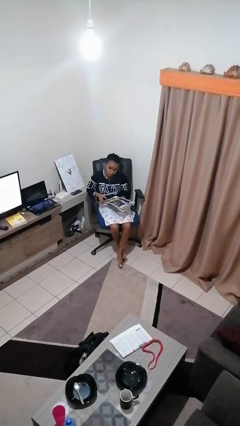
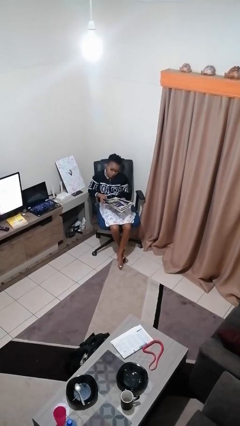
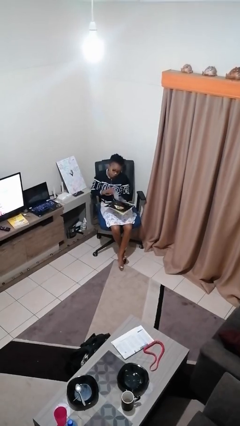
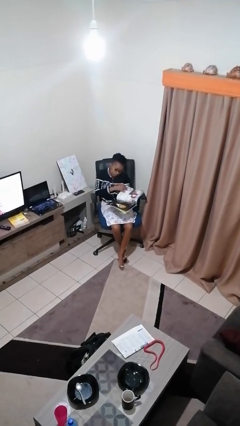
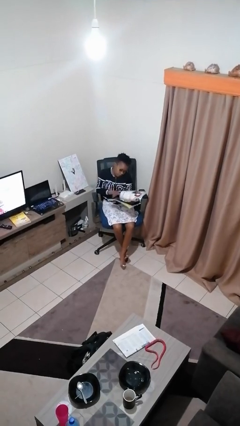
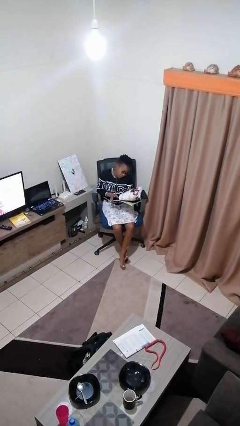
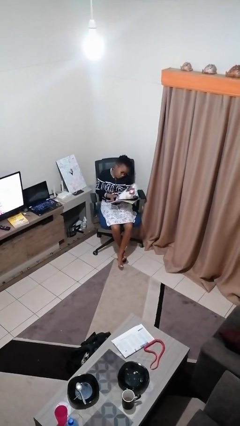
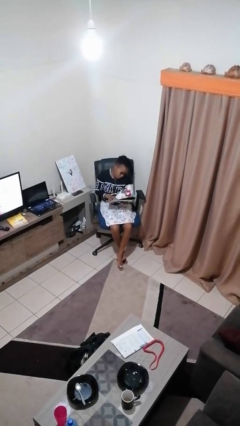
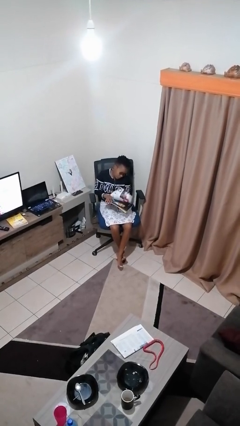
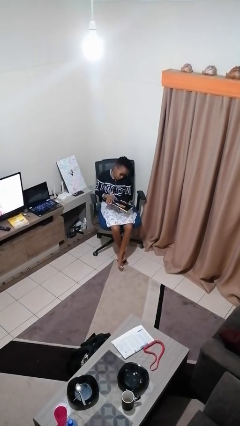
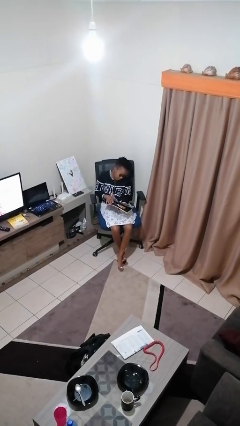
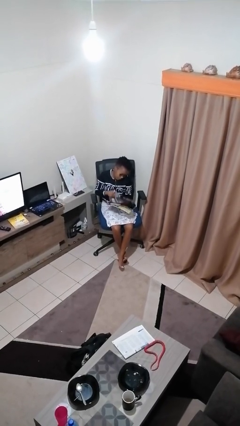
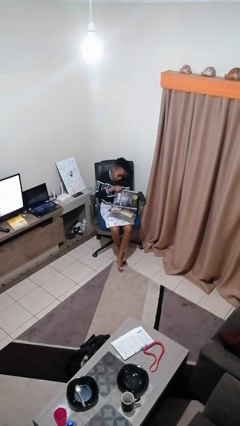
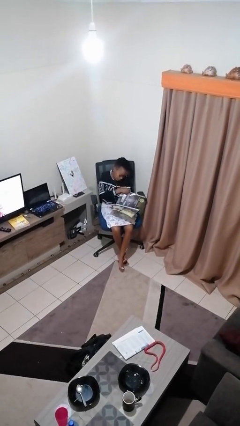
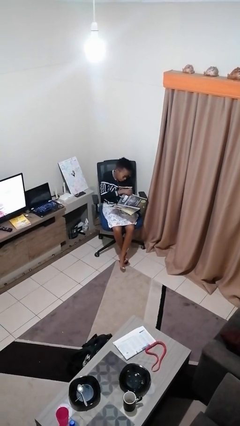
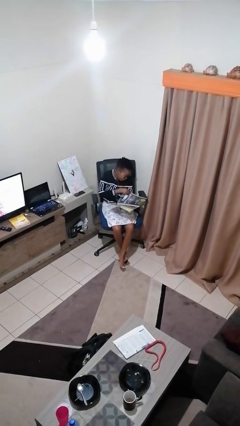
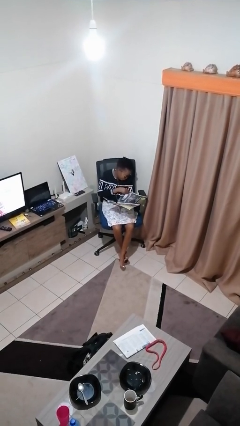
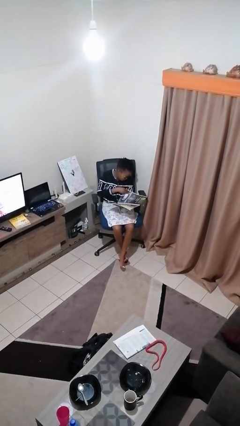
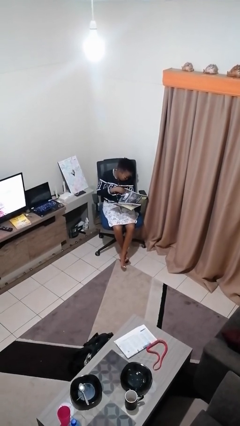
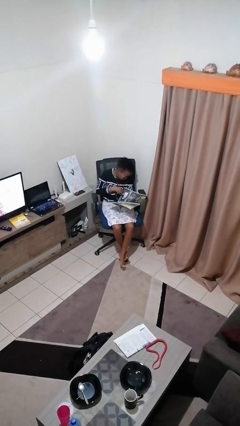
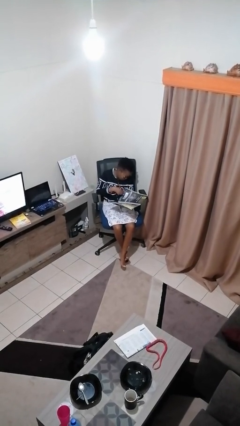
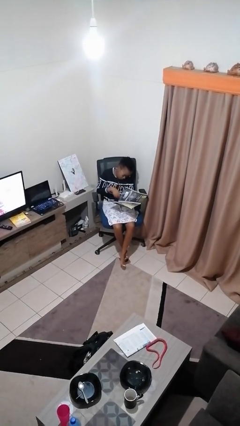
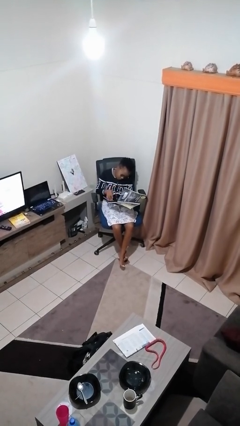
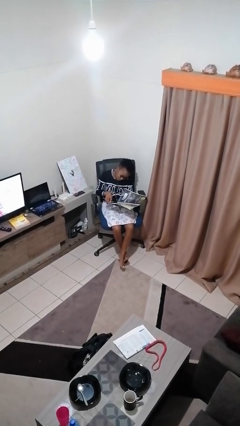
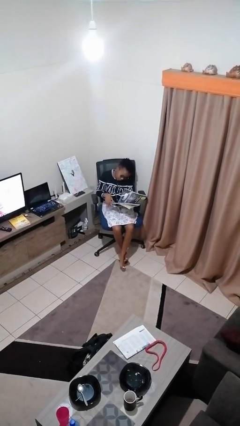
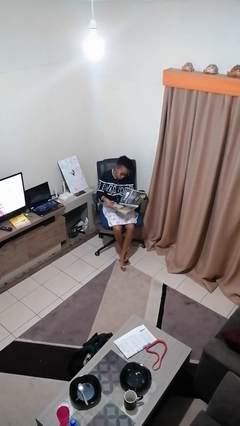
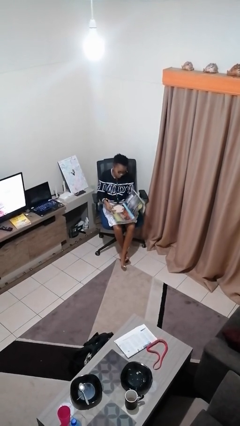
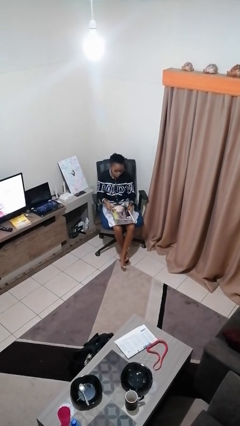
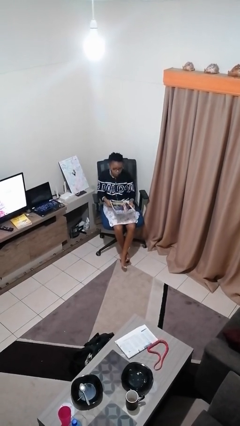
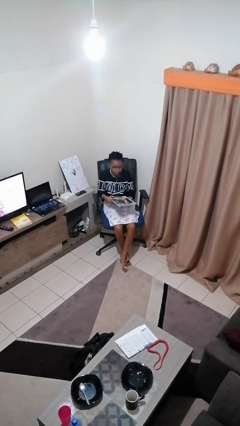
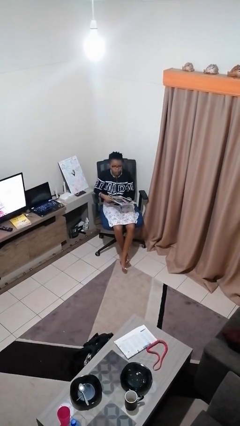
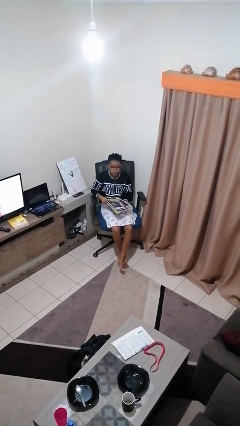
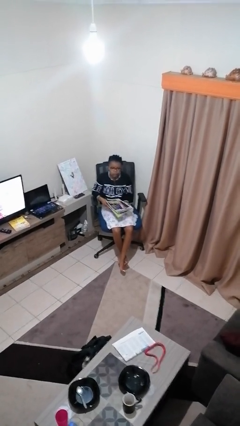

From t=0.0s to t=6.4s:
person reads magazine

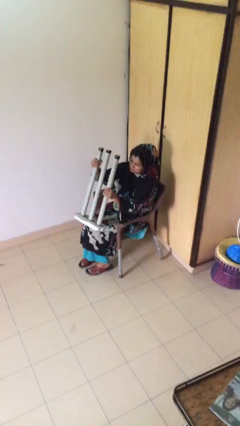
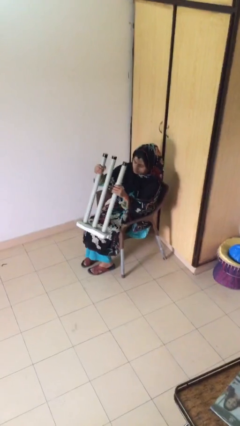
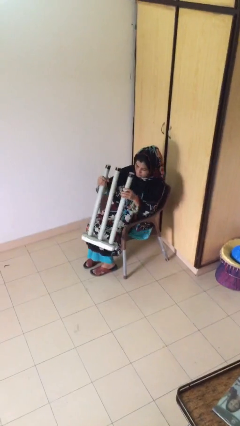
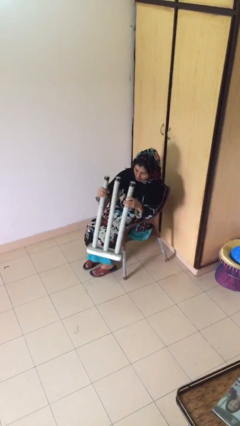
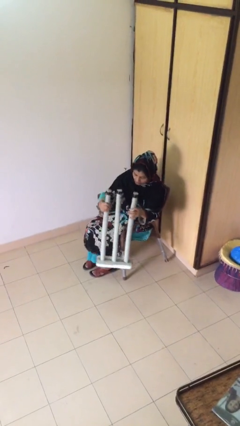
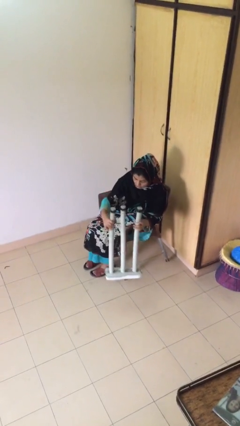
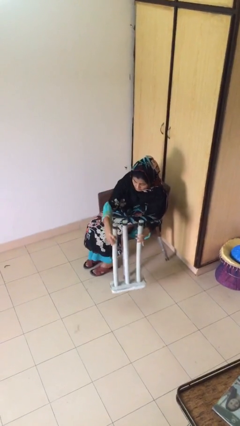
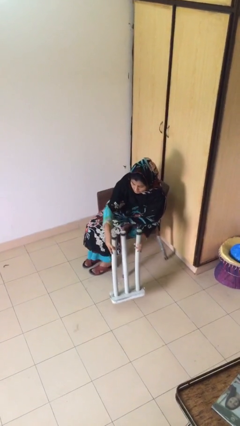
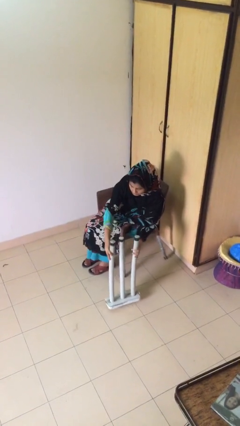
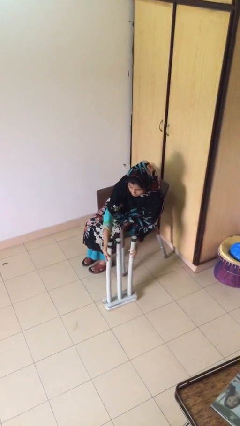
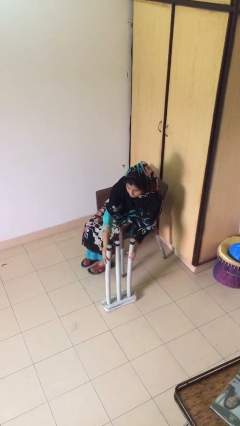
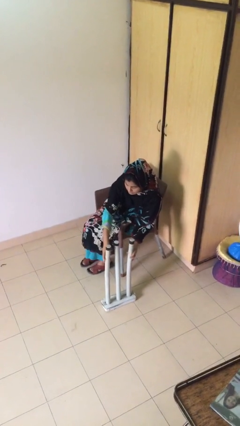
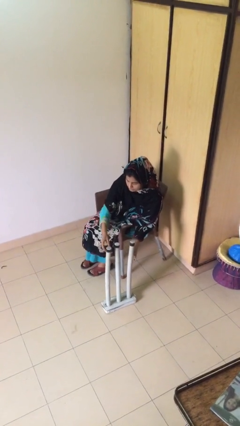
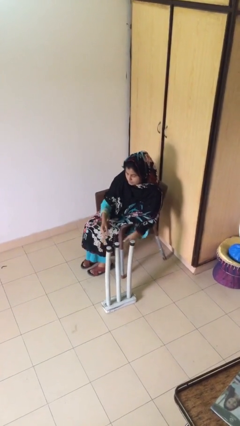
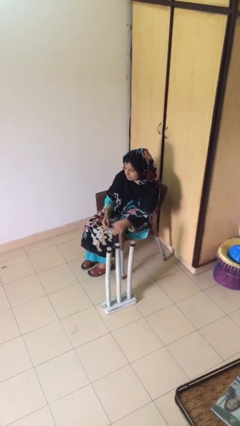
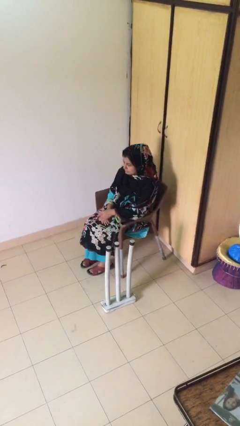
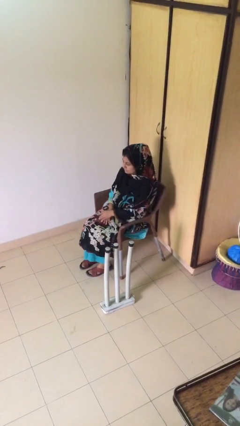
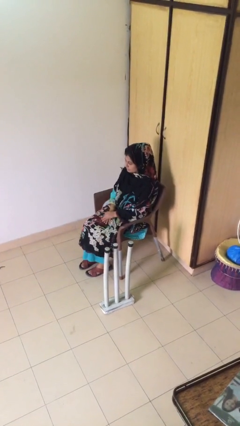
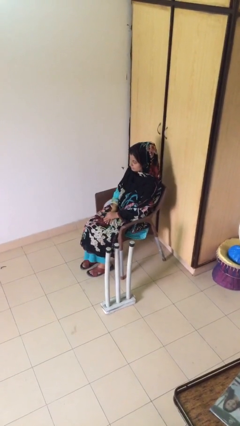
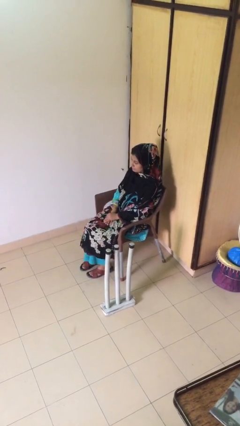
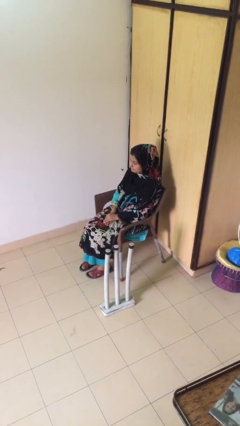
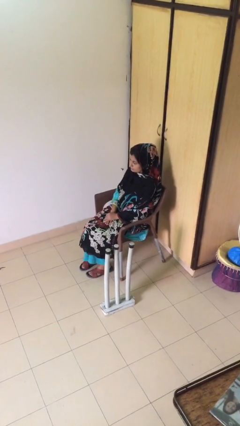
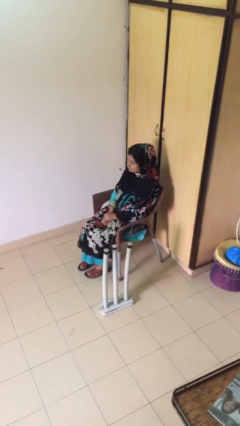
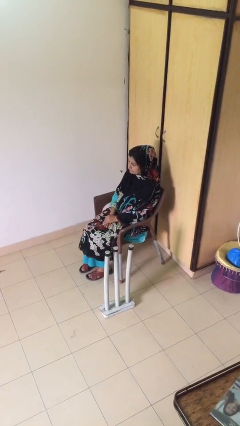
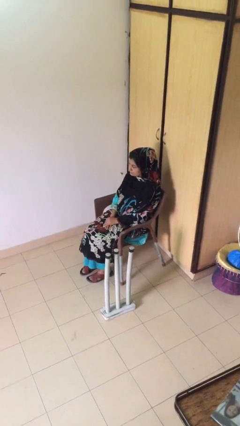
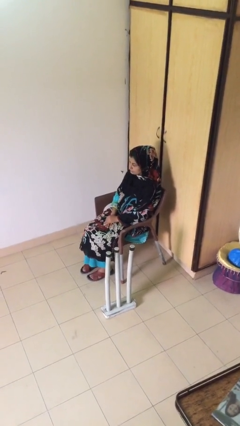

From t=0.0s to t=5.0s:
person puts down object on floor

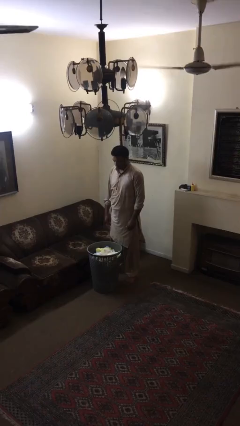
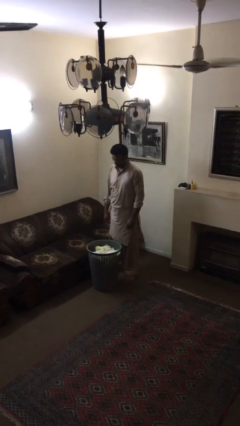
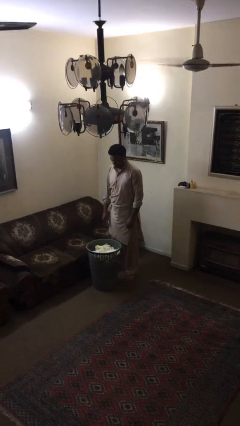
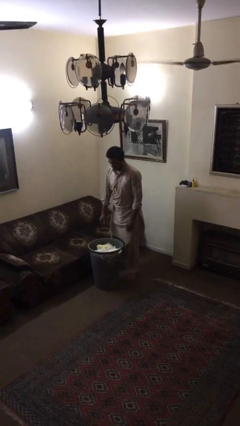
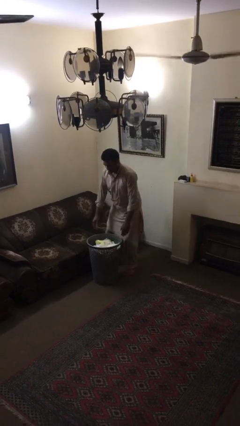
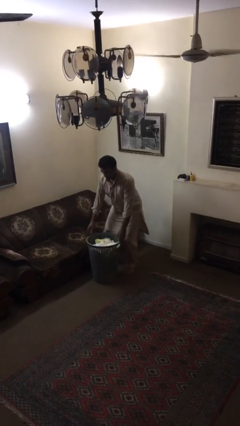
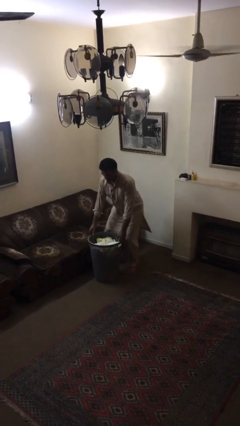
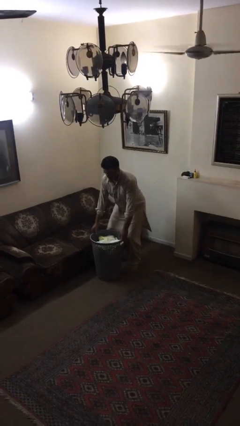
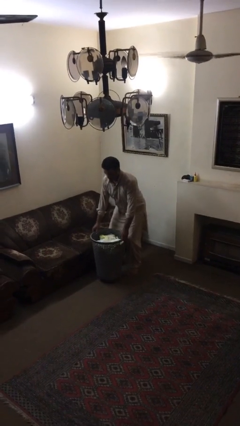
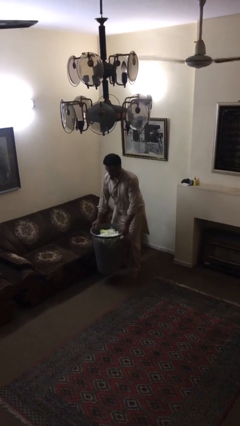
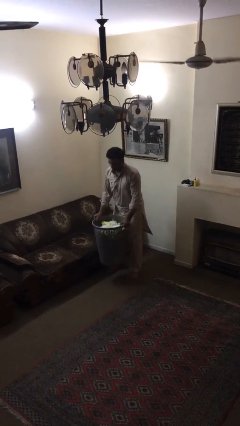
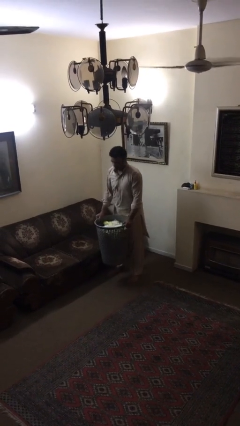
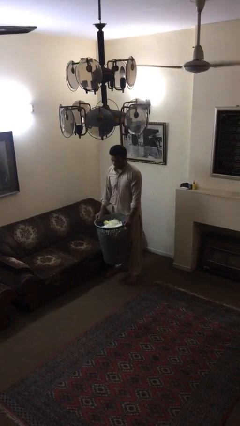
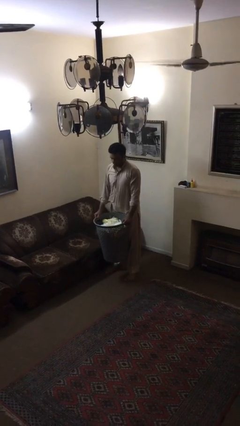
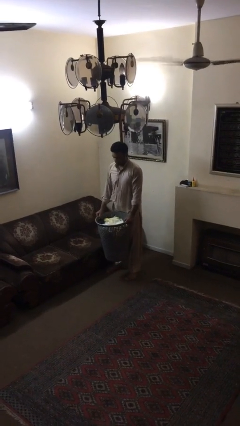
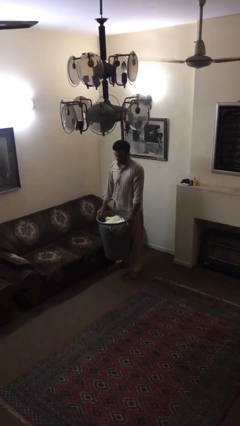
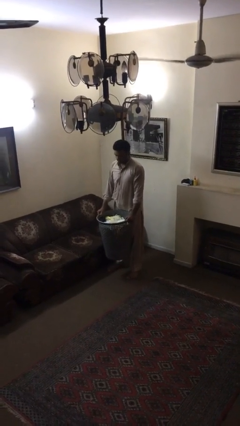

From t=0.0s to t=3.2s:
person picks up object from floor

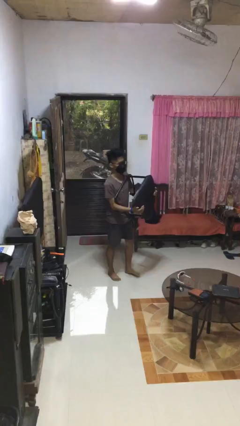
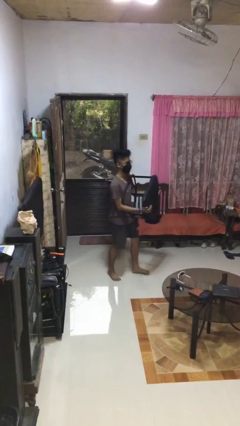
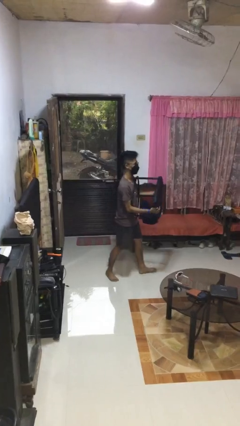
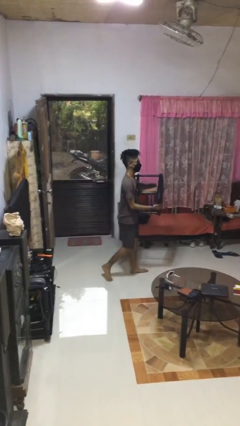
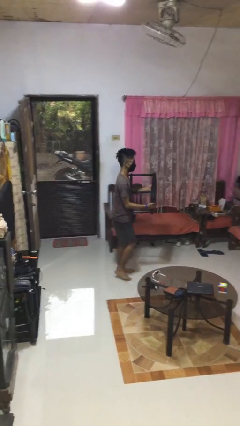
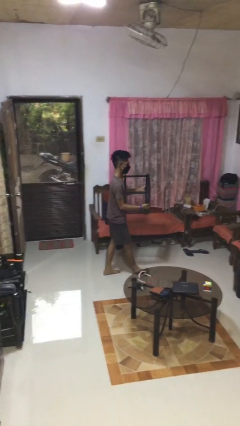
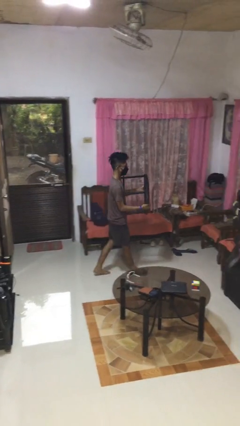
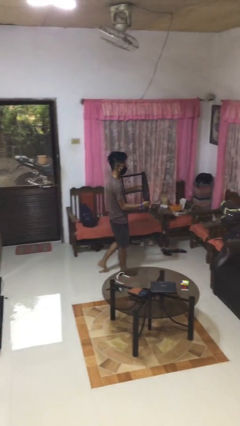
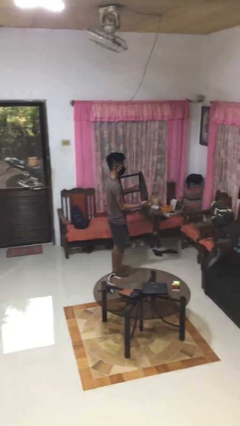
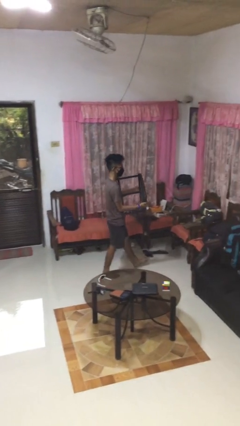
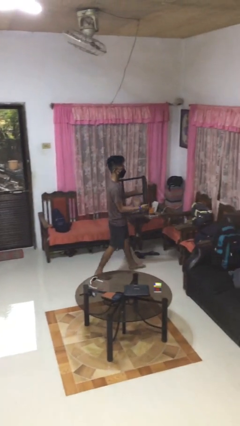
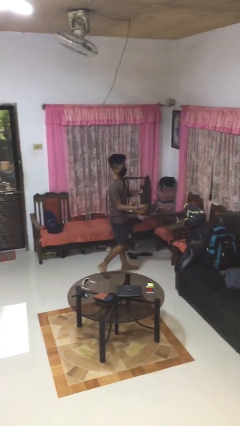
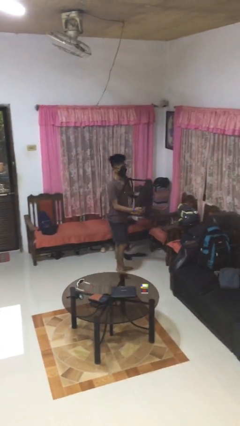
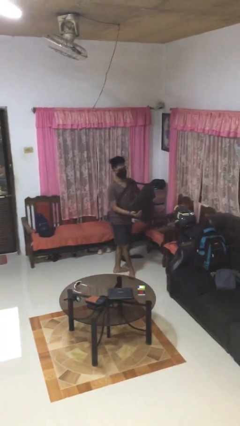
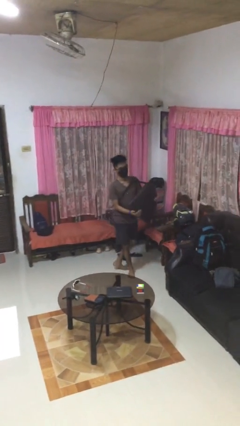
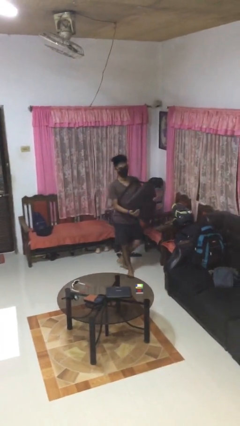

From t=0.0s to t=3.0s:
person carries furniture

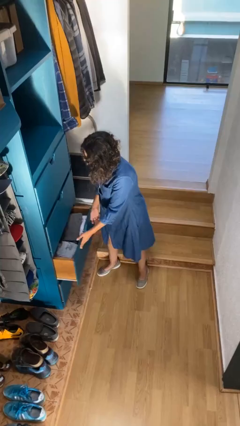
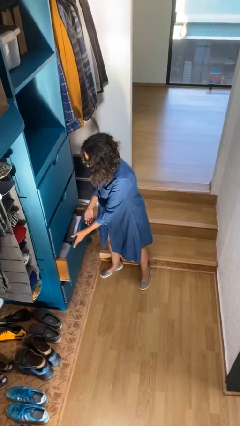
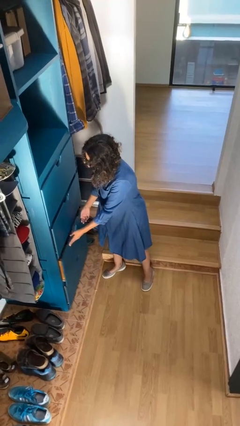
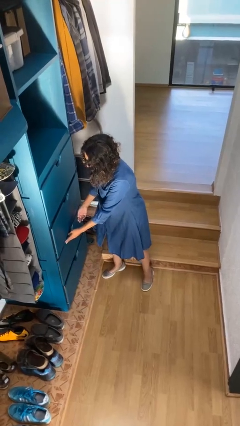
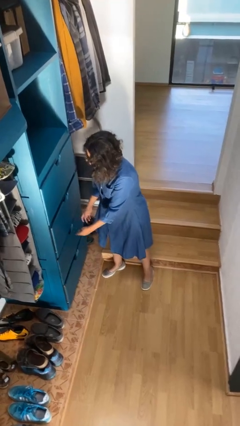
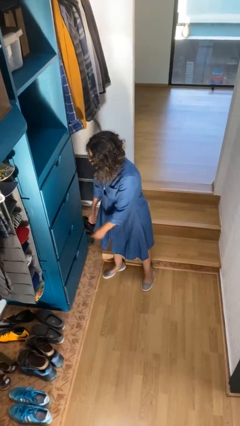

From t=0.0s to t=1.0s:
person closes dresser drawer
